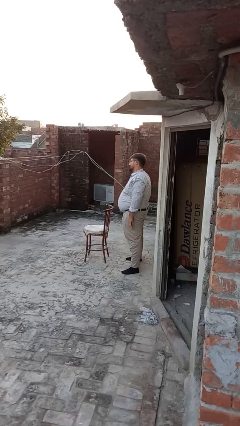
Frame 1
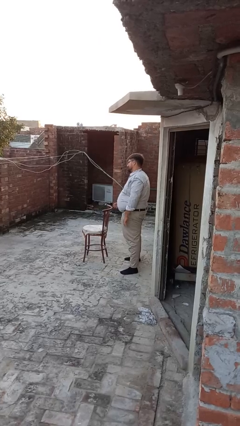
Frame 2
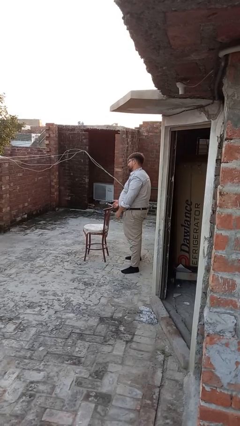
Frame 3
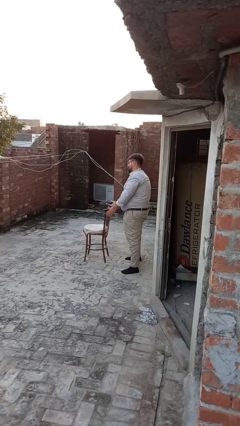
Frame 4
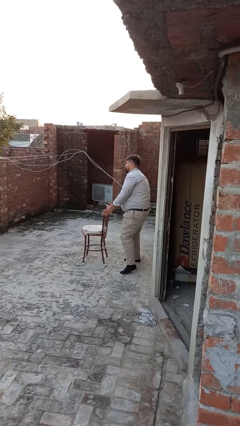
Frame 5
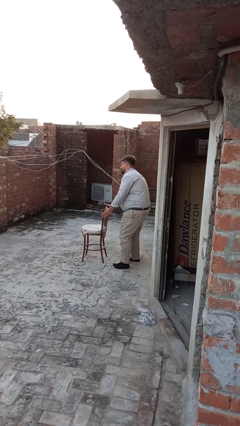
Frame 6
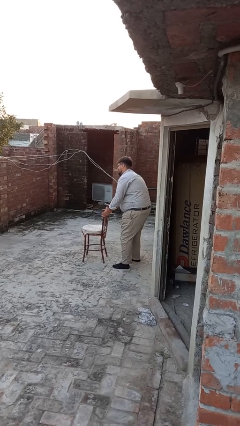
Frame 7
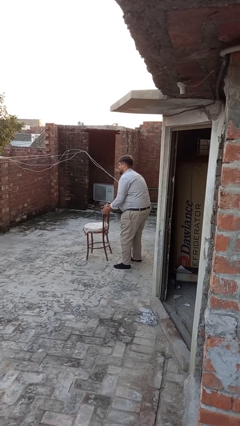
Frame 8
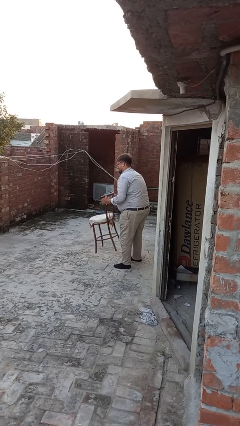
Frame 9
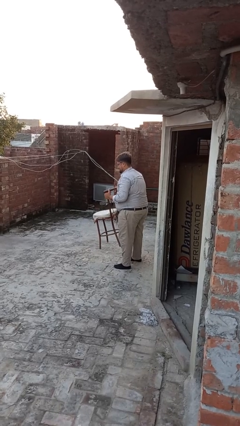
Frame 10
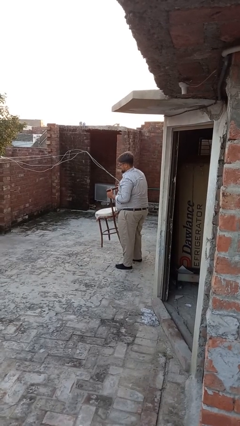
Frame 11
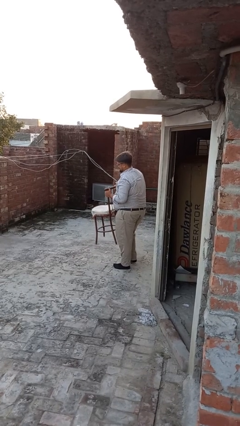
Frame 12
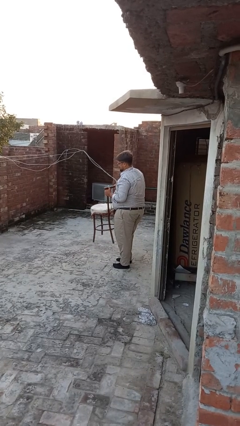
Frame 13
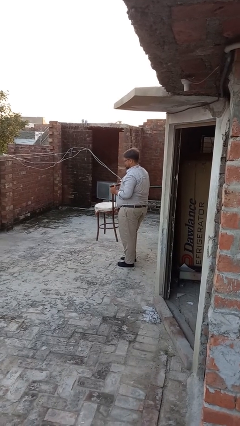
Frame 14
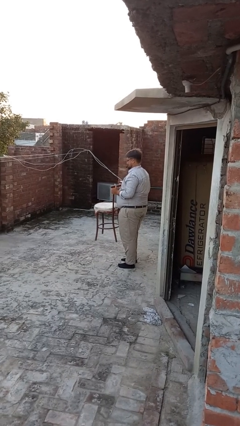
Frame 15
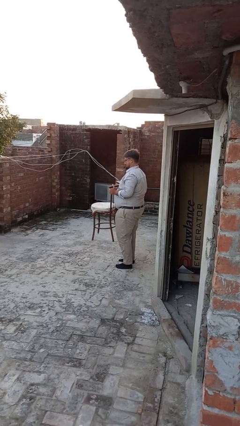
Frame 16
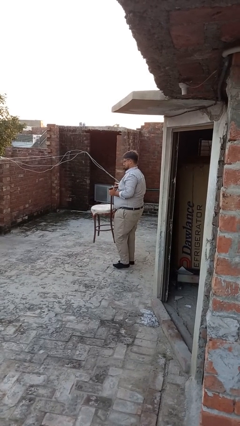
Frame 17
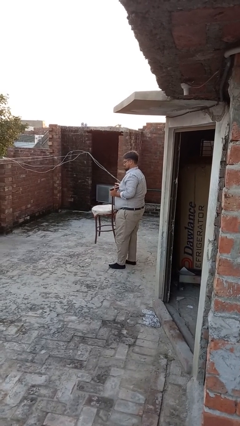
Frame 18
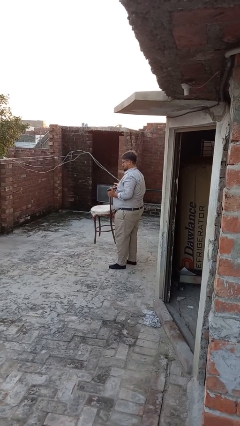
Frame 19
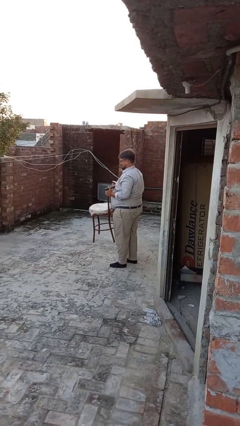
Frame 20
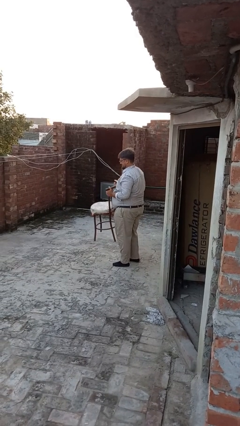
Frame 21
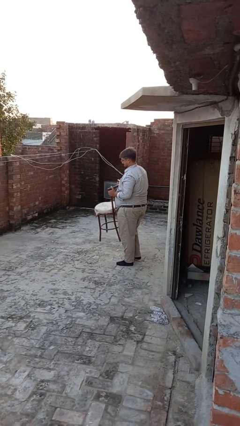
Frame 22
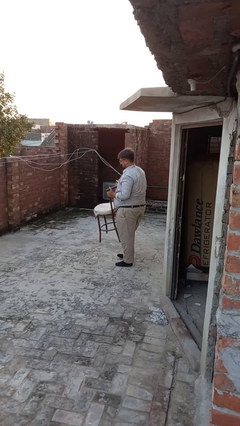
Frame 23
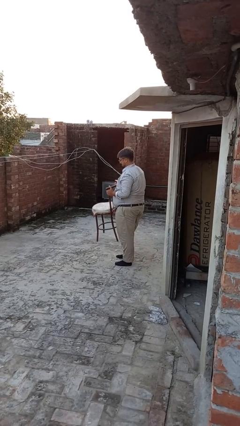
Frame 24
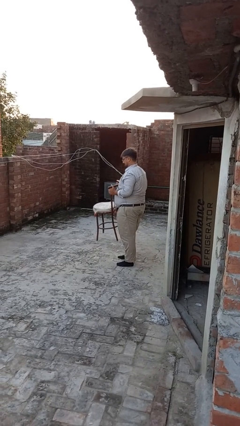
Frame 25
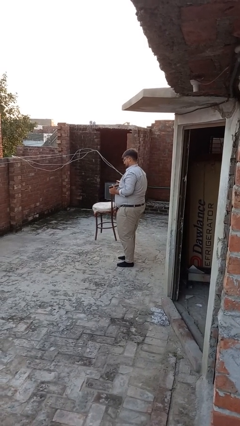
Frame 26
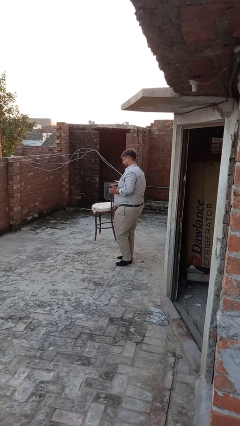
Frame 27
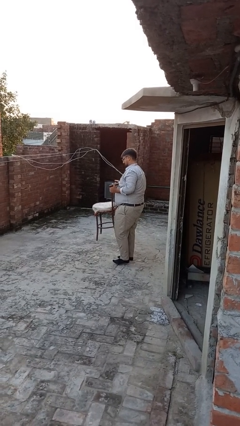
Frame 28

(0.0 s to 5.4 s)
person carries furniture

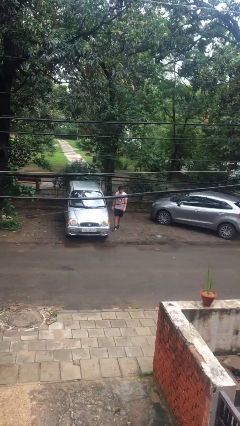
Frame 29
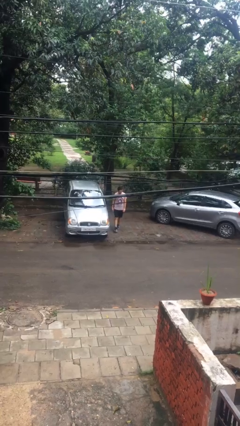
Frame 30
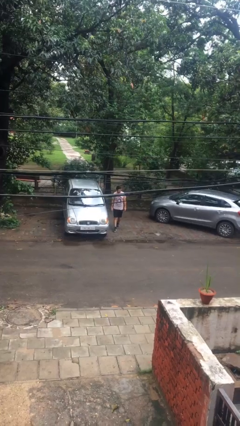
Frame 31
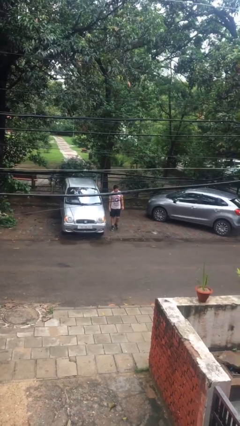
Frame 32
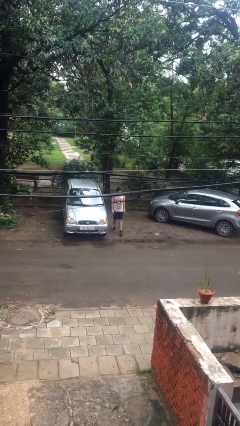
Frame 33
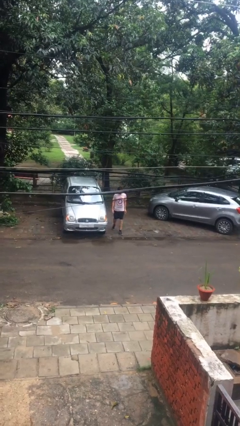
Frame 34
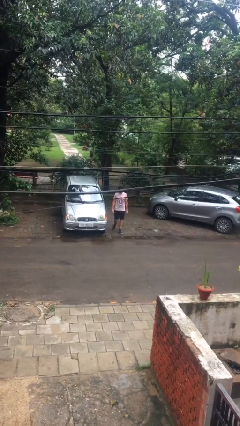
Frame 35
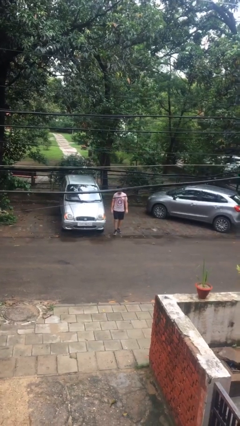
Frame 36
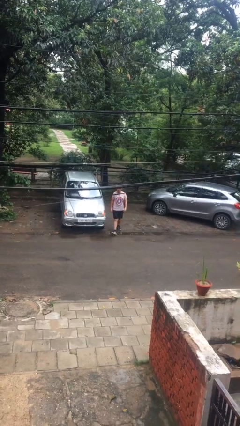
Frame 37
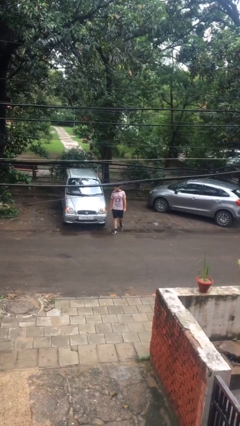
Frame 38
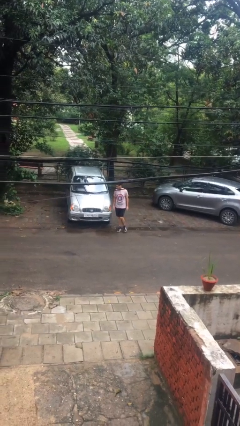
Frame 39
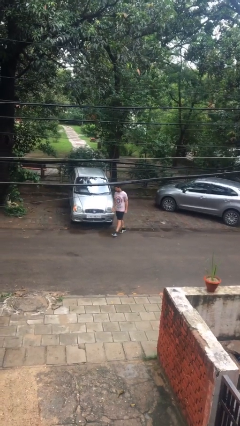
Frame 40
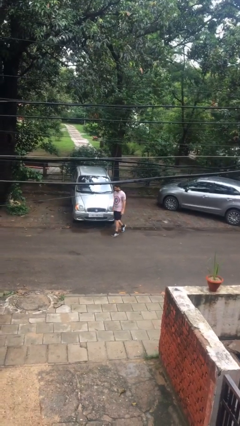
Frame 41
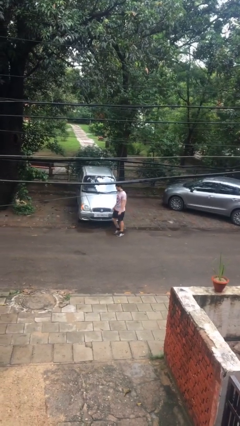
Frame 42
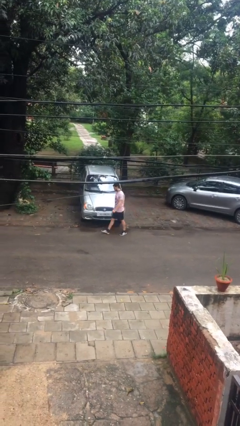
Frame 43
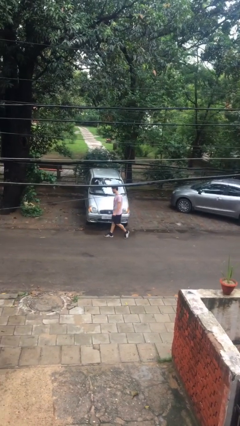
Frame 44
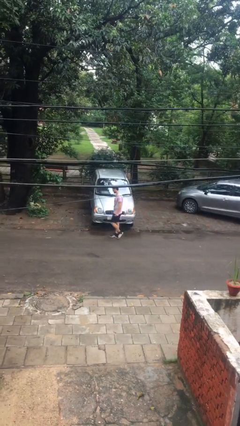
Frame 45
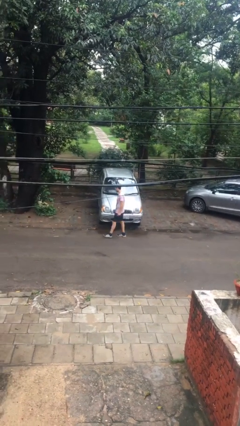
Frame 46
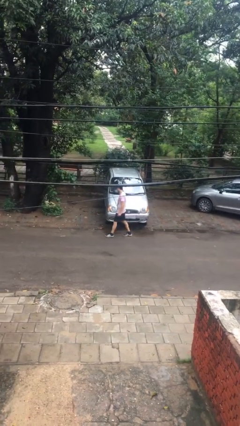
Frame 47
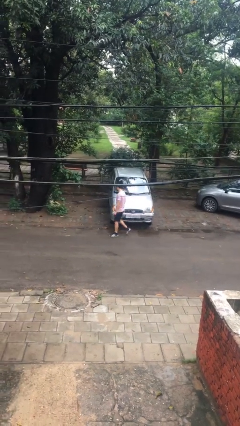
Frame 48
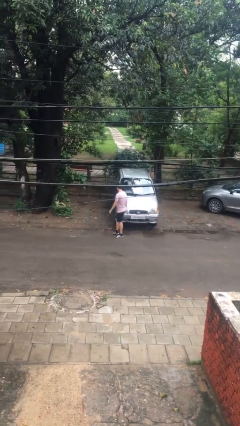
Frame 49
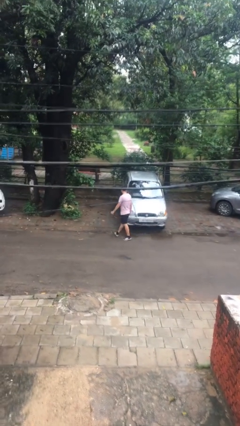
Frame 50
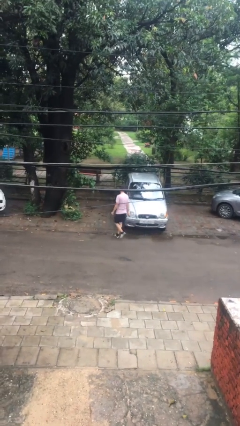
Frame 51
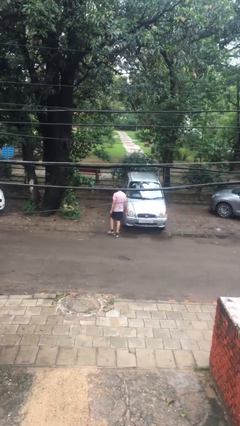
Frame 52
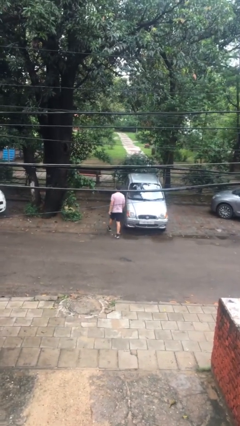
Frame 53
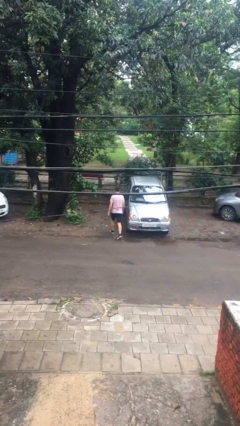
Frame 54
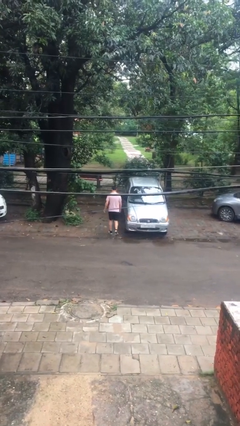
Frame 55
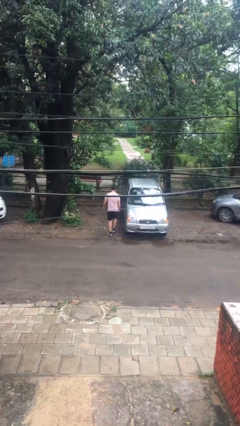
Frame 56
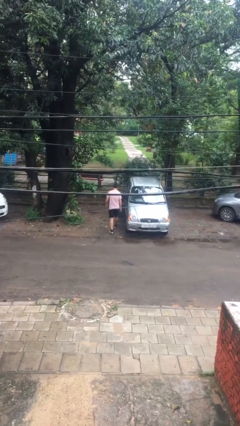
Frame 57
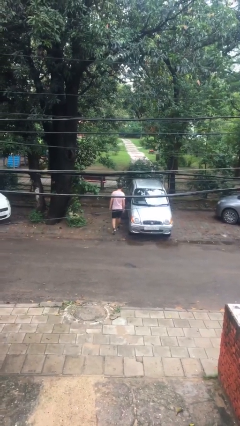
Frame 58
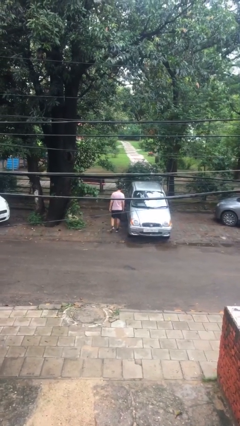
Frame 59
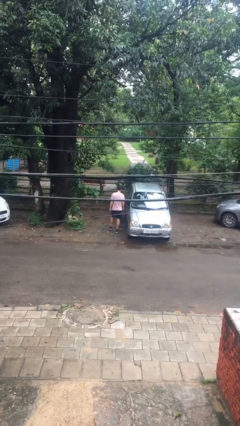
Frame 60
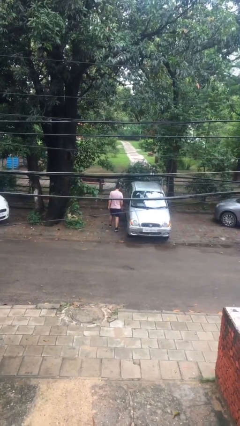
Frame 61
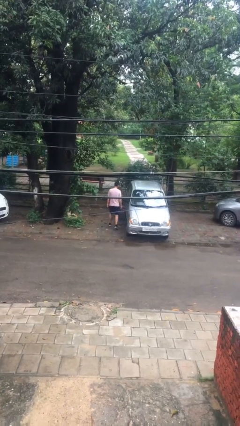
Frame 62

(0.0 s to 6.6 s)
person walks around car

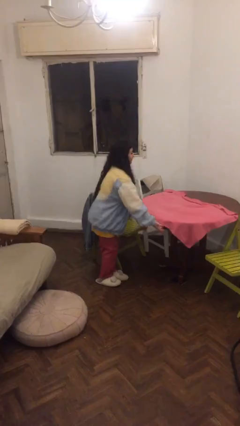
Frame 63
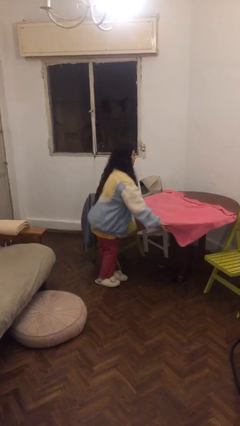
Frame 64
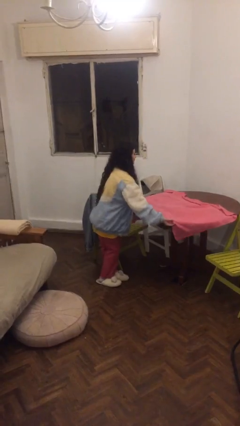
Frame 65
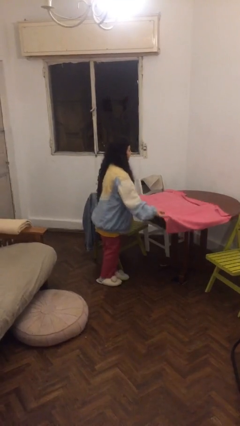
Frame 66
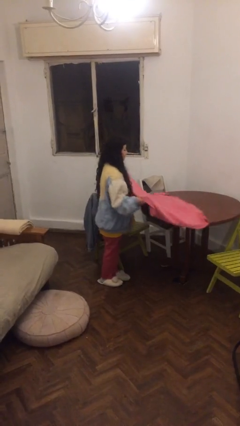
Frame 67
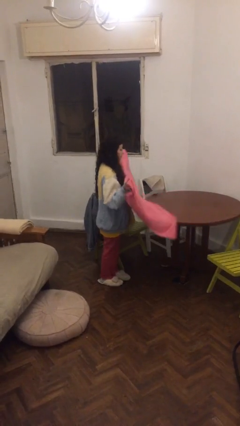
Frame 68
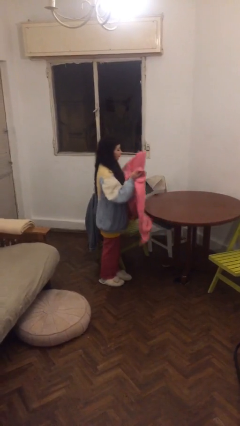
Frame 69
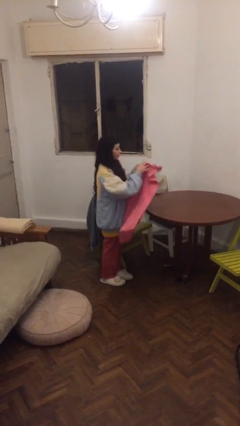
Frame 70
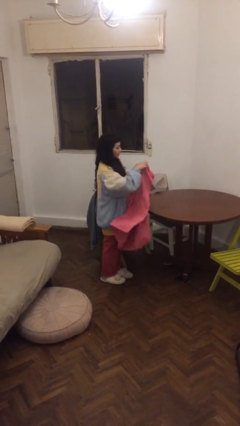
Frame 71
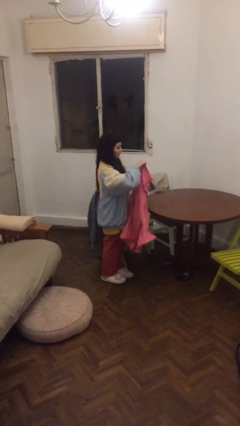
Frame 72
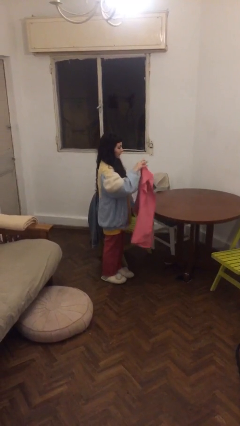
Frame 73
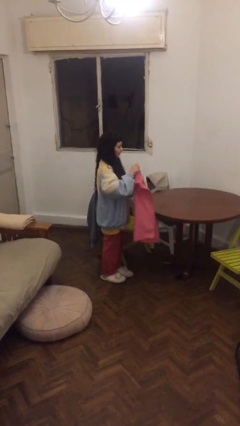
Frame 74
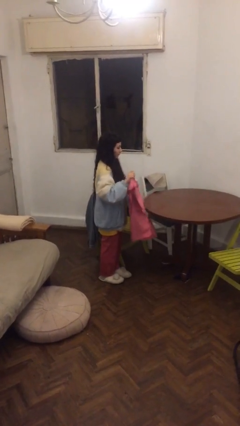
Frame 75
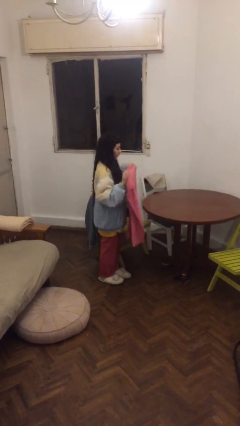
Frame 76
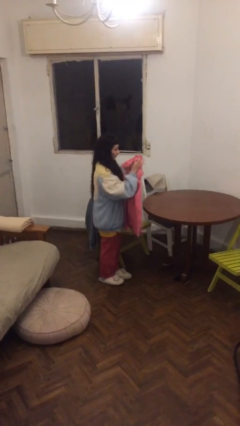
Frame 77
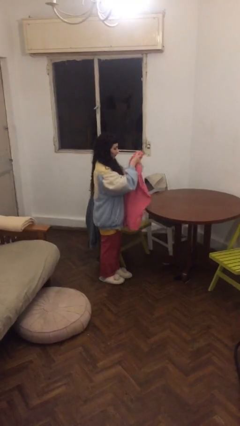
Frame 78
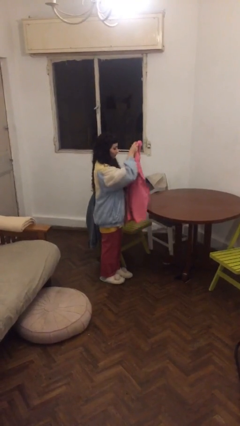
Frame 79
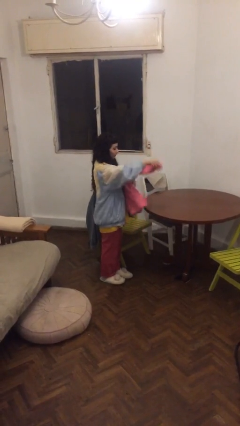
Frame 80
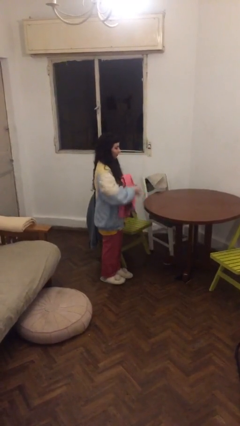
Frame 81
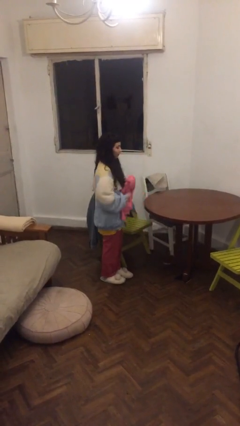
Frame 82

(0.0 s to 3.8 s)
person folds tablecloth

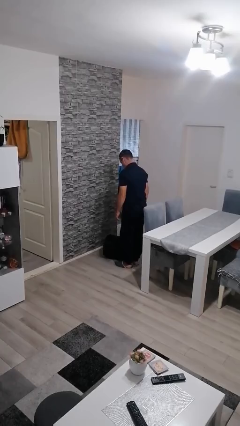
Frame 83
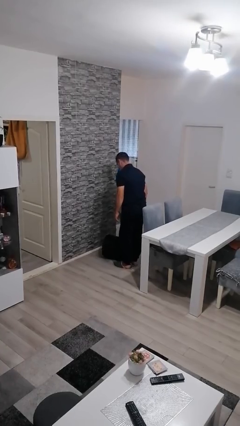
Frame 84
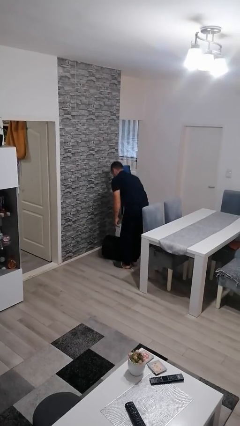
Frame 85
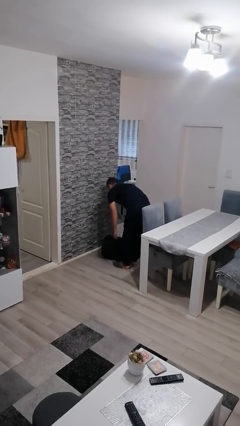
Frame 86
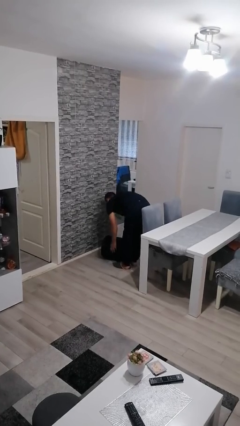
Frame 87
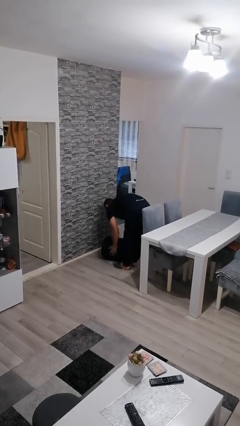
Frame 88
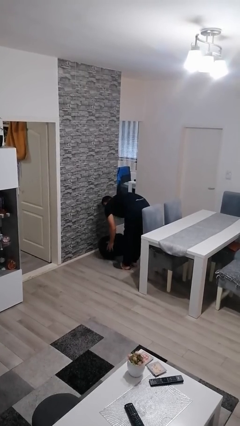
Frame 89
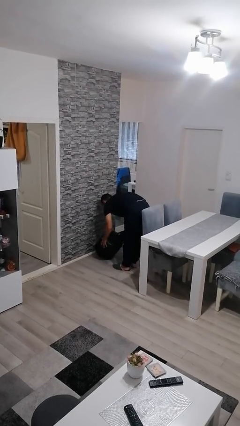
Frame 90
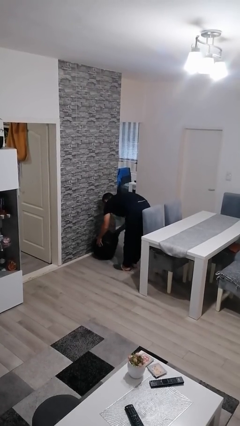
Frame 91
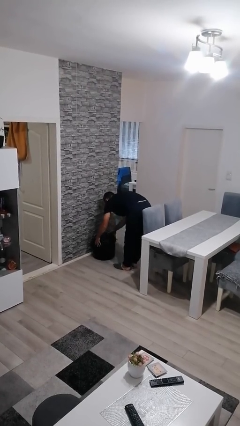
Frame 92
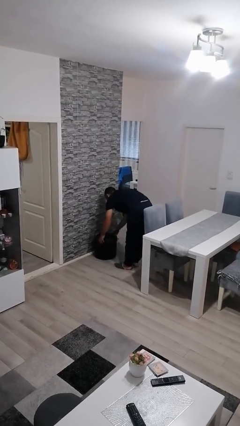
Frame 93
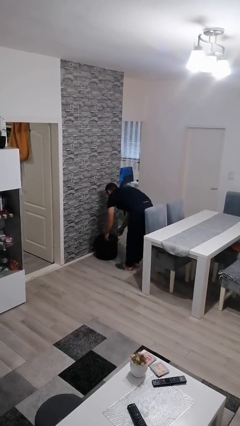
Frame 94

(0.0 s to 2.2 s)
person sets upright furniture
